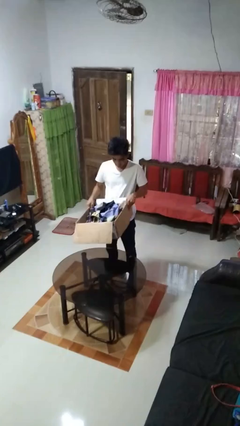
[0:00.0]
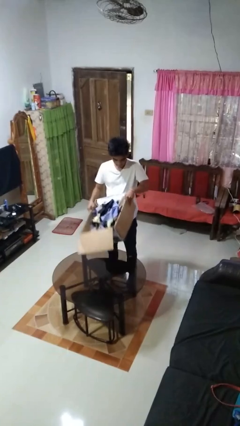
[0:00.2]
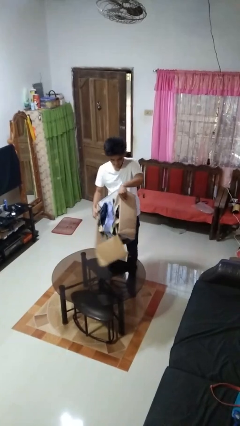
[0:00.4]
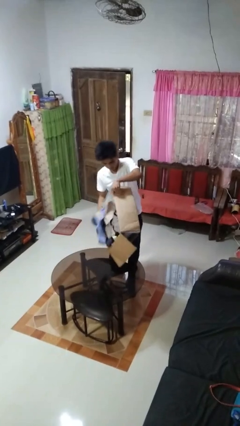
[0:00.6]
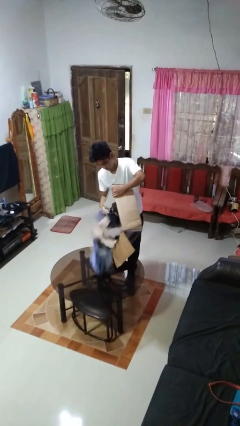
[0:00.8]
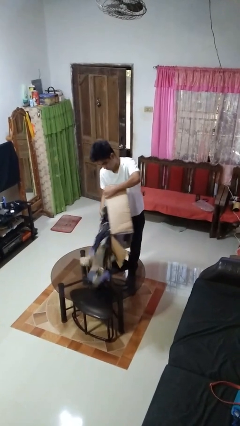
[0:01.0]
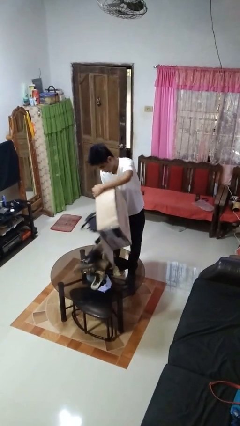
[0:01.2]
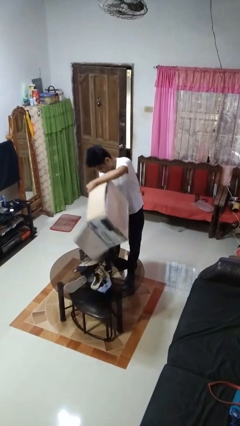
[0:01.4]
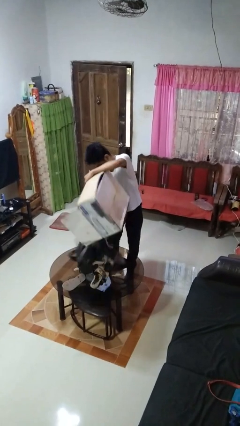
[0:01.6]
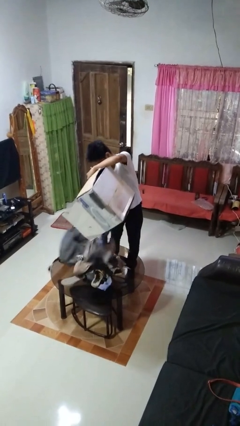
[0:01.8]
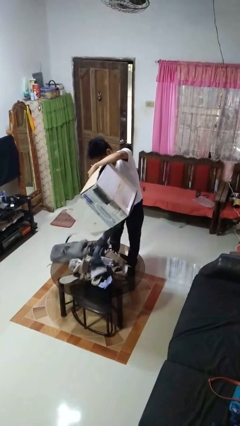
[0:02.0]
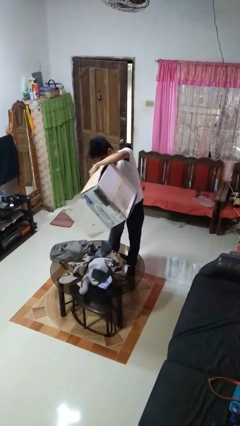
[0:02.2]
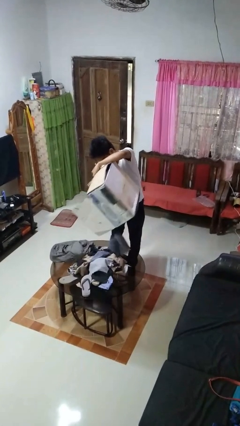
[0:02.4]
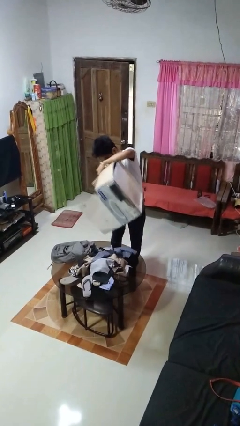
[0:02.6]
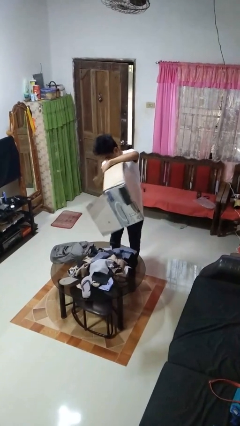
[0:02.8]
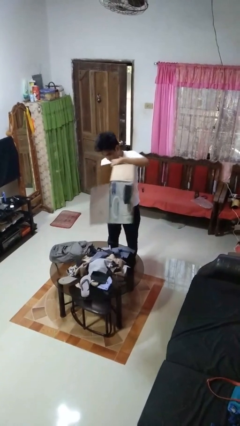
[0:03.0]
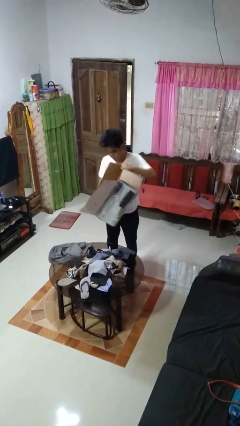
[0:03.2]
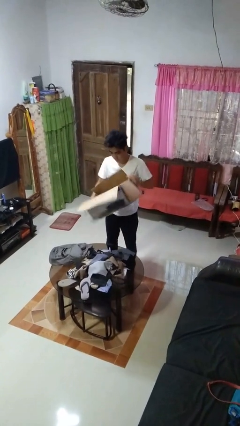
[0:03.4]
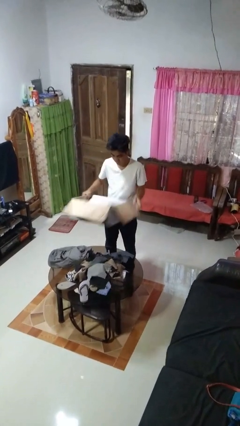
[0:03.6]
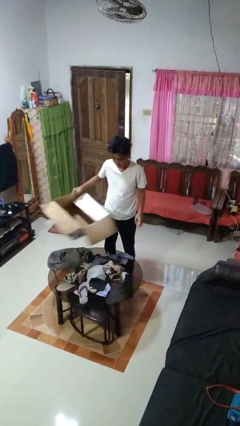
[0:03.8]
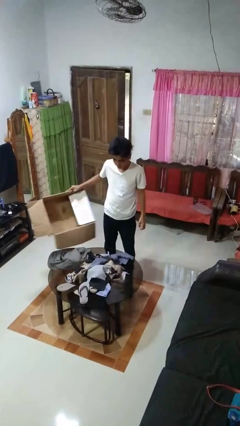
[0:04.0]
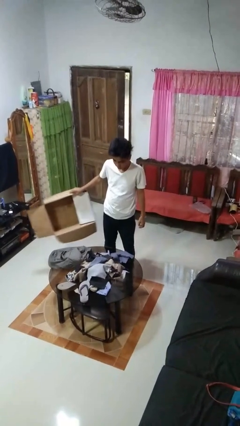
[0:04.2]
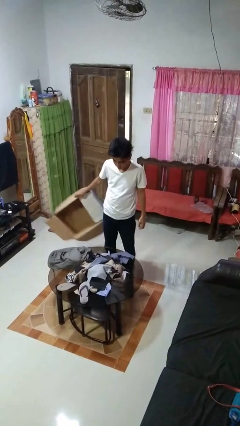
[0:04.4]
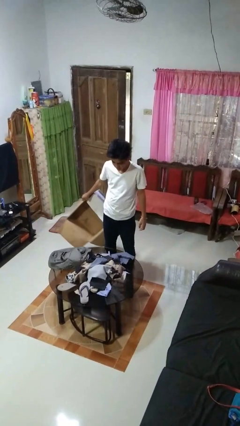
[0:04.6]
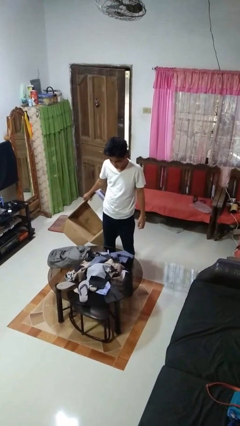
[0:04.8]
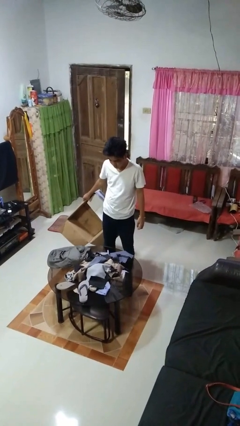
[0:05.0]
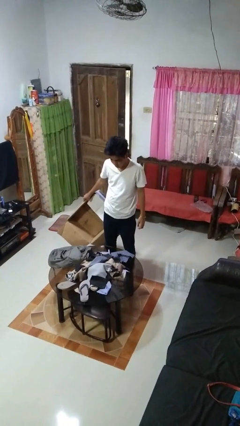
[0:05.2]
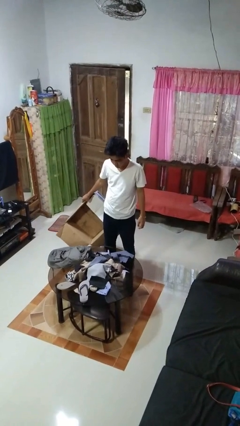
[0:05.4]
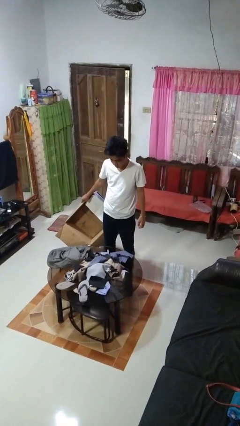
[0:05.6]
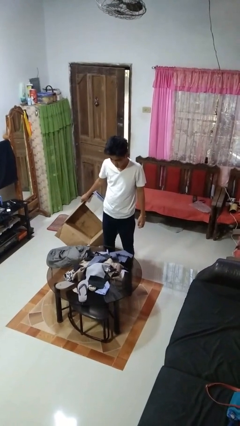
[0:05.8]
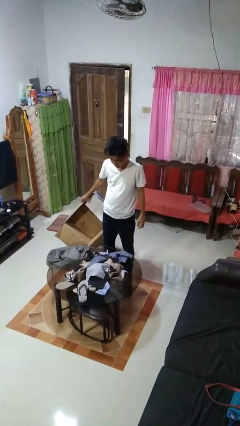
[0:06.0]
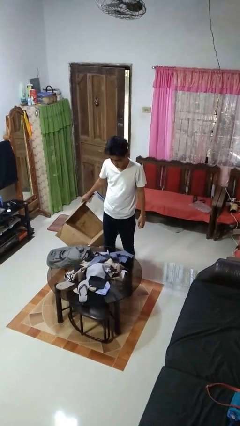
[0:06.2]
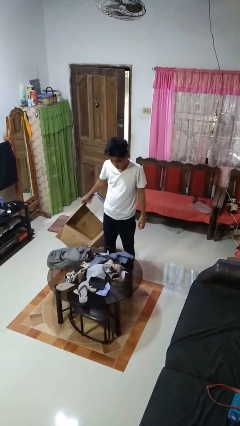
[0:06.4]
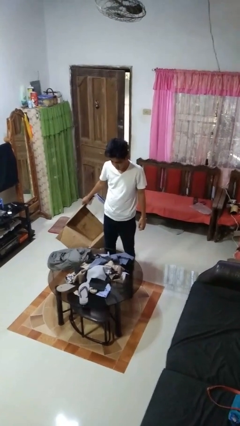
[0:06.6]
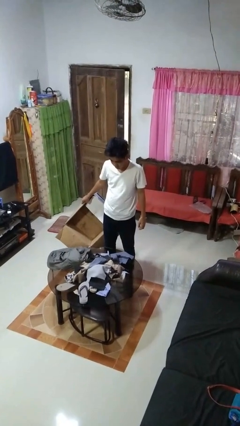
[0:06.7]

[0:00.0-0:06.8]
person unloads box onto table

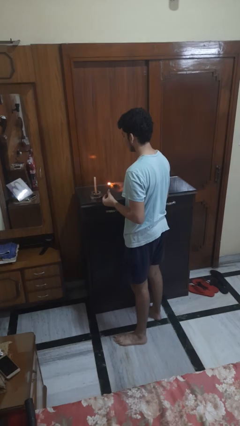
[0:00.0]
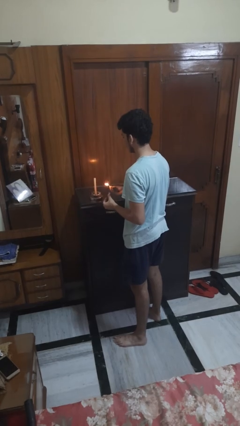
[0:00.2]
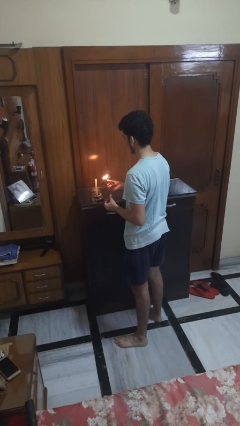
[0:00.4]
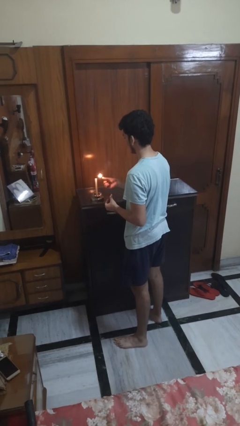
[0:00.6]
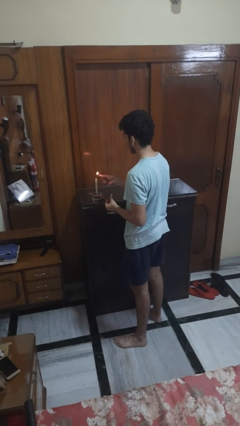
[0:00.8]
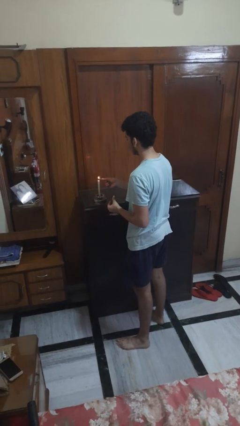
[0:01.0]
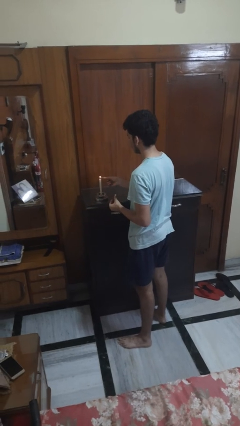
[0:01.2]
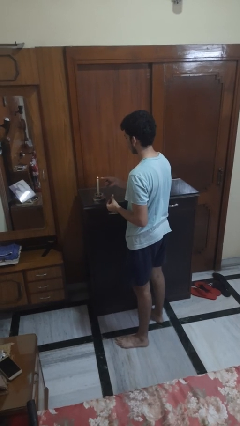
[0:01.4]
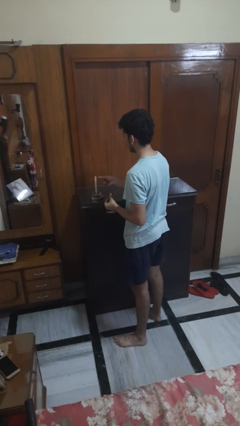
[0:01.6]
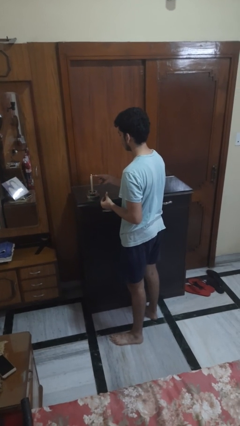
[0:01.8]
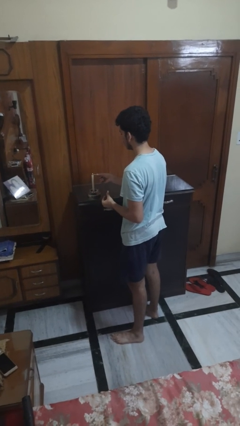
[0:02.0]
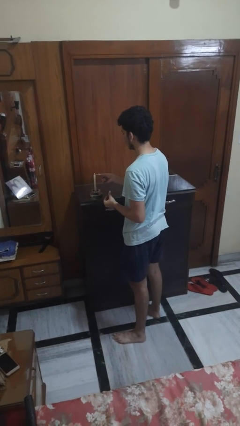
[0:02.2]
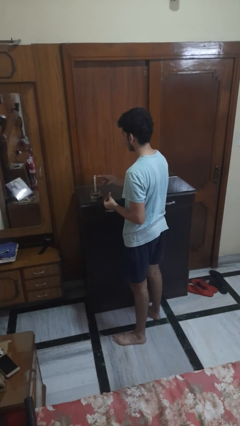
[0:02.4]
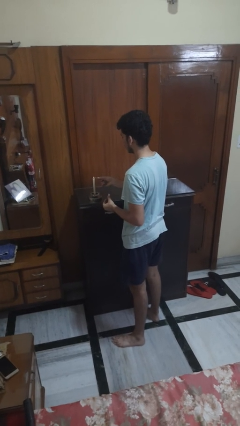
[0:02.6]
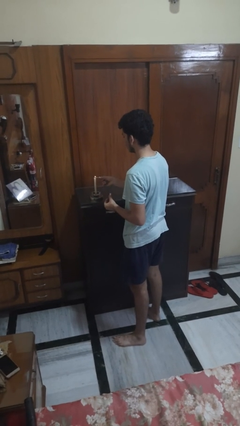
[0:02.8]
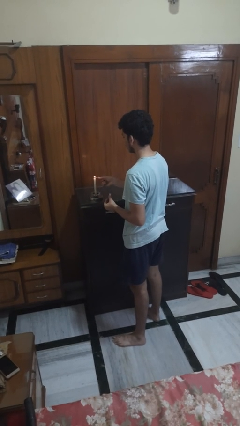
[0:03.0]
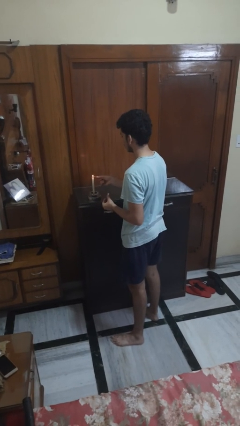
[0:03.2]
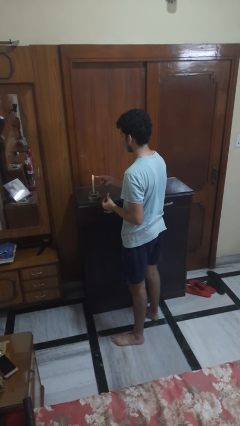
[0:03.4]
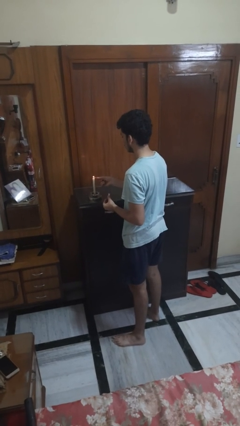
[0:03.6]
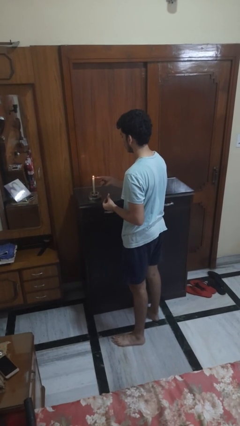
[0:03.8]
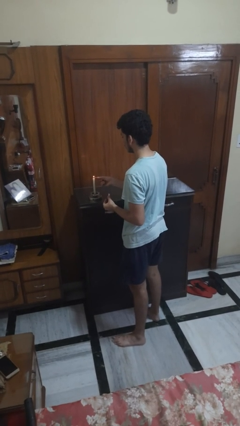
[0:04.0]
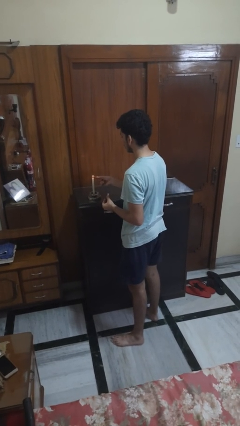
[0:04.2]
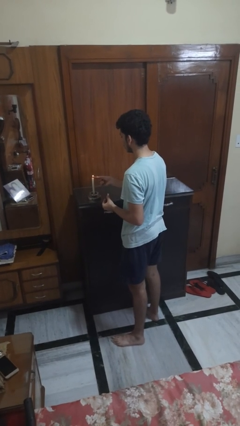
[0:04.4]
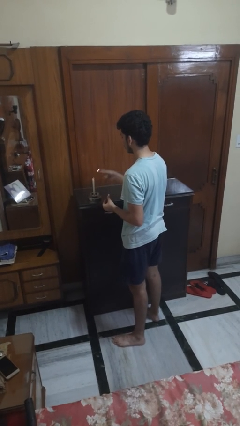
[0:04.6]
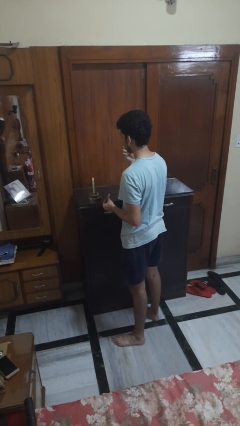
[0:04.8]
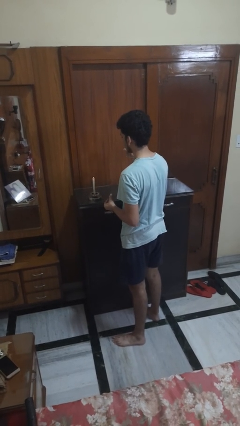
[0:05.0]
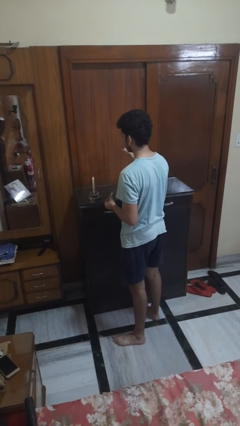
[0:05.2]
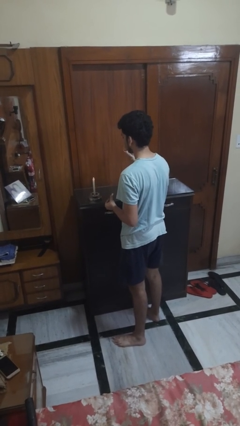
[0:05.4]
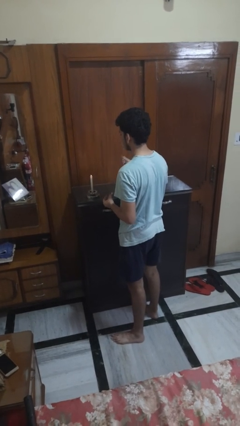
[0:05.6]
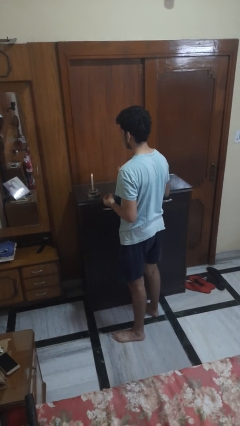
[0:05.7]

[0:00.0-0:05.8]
person lights candle

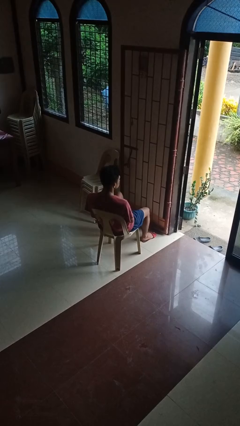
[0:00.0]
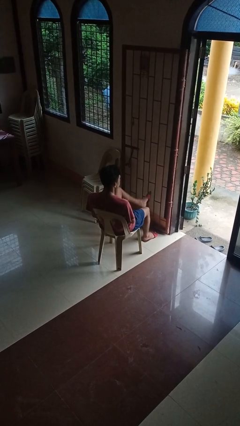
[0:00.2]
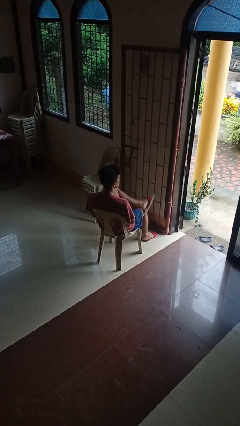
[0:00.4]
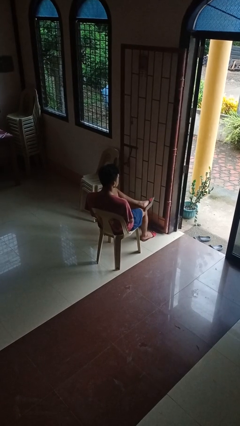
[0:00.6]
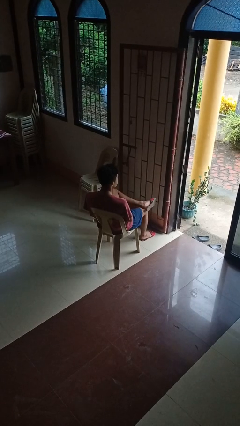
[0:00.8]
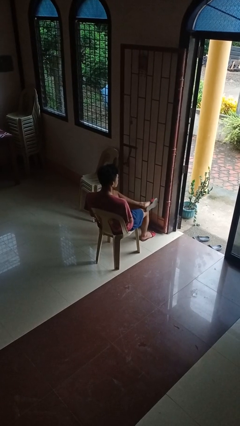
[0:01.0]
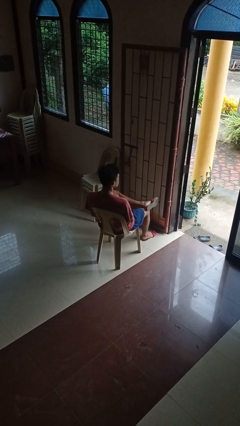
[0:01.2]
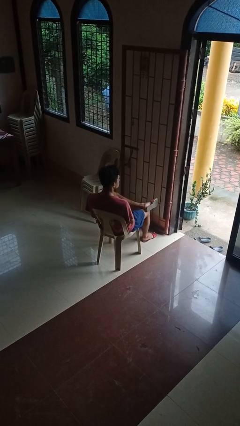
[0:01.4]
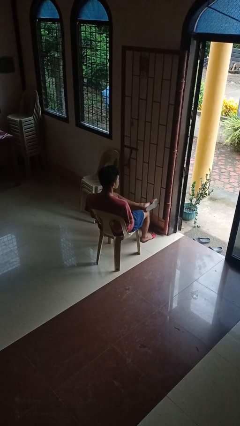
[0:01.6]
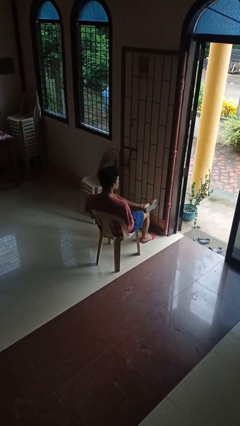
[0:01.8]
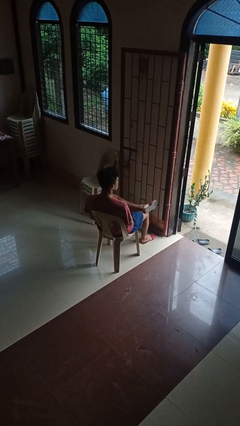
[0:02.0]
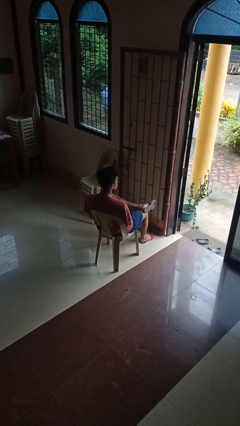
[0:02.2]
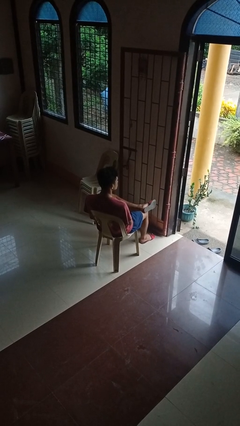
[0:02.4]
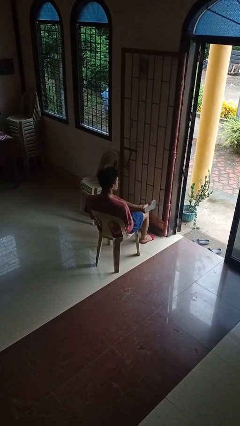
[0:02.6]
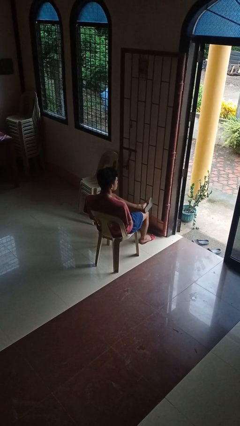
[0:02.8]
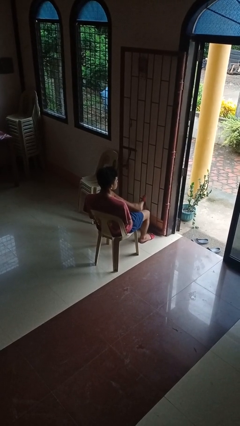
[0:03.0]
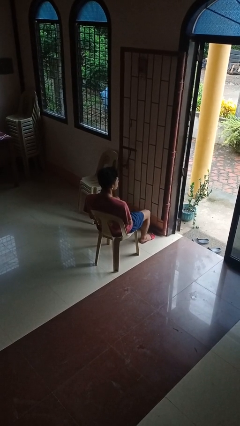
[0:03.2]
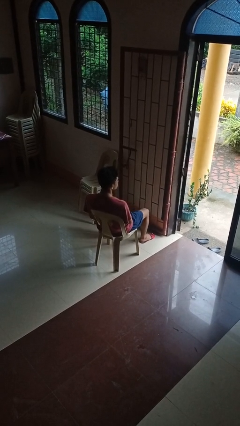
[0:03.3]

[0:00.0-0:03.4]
person crosses legs

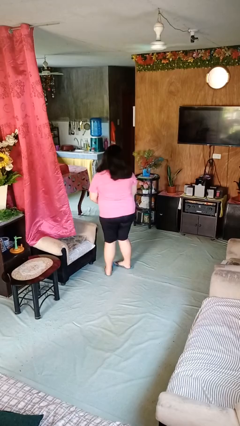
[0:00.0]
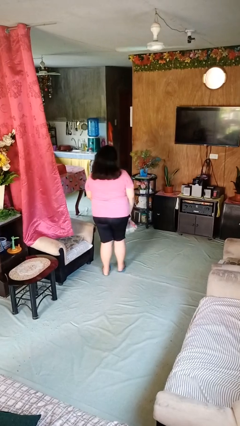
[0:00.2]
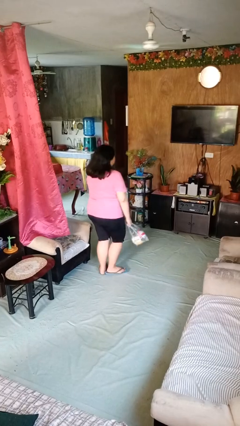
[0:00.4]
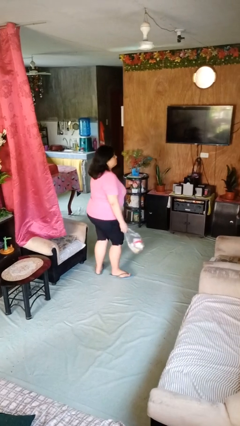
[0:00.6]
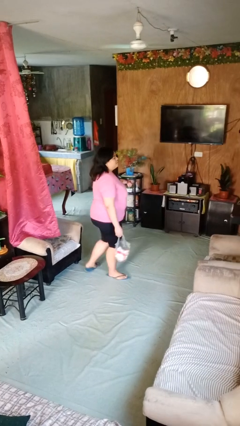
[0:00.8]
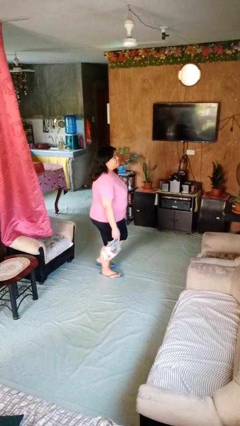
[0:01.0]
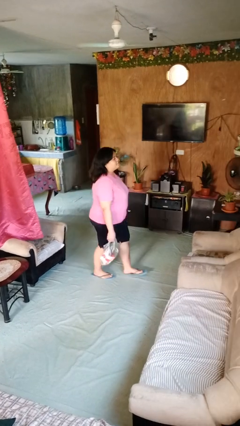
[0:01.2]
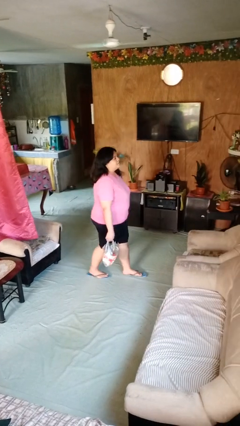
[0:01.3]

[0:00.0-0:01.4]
person carries groceries

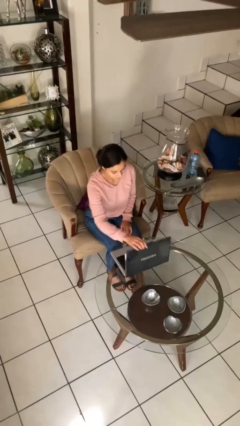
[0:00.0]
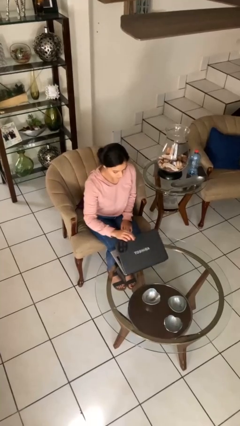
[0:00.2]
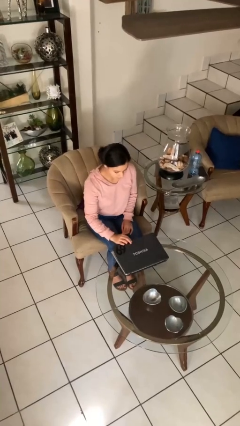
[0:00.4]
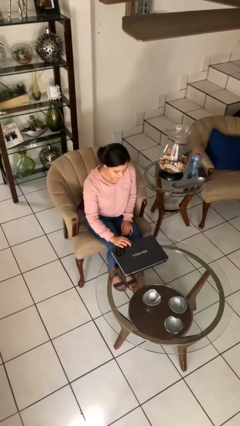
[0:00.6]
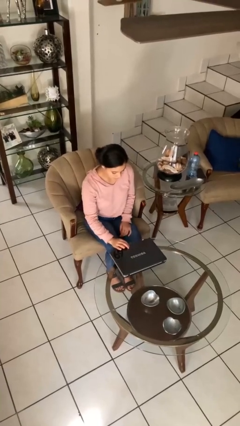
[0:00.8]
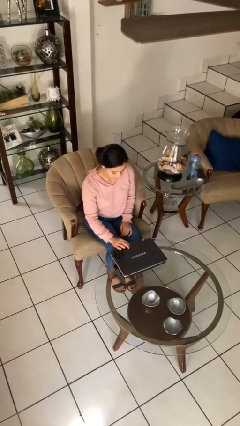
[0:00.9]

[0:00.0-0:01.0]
person closes laptop
